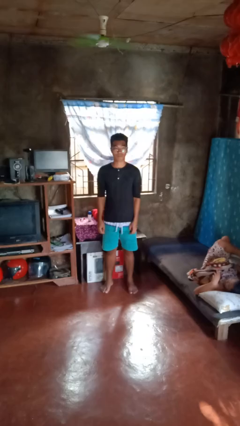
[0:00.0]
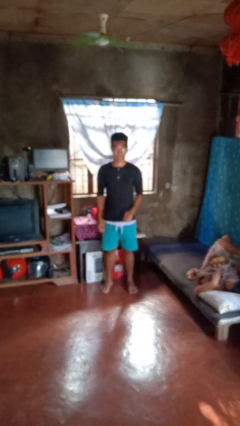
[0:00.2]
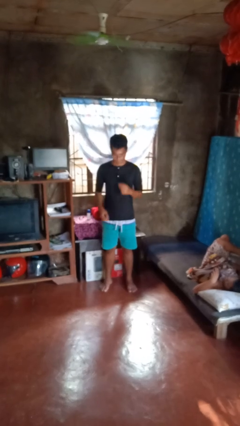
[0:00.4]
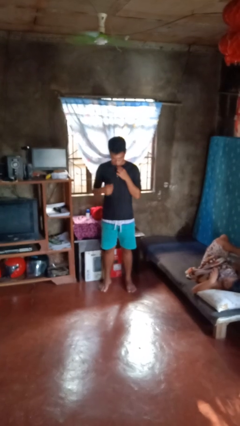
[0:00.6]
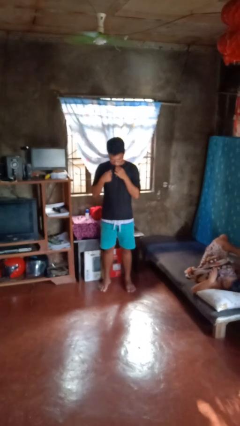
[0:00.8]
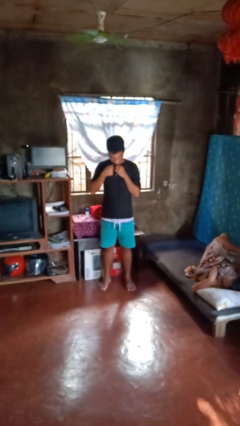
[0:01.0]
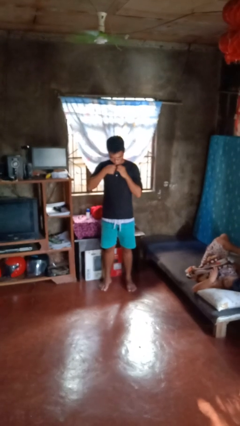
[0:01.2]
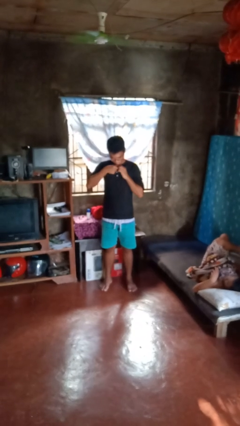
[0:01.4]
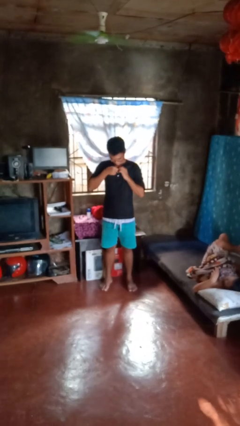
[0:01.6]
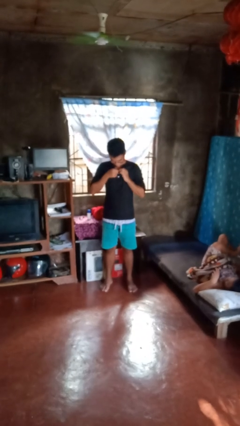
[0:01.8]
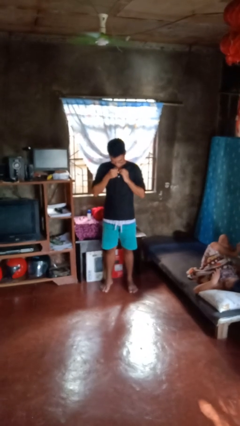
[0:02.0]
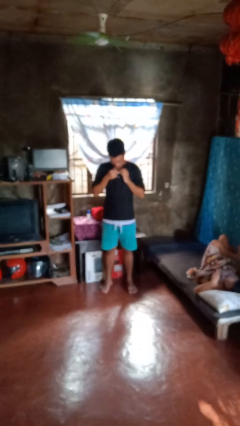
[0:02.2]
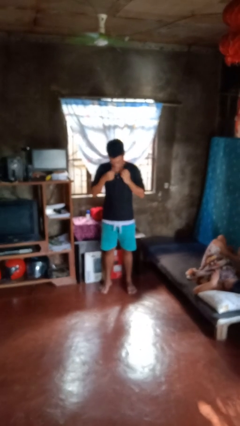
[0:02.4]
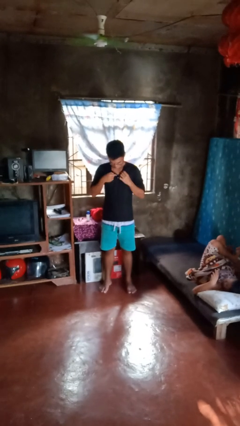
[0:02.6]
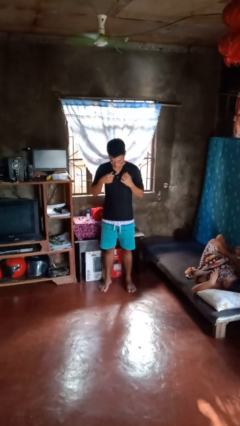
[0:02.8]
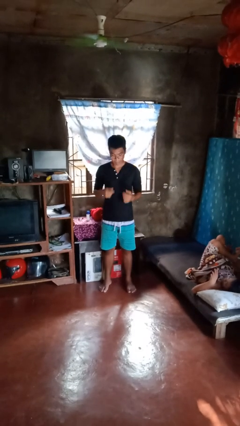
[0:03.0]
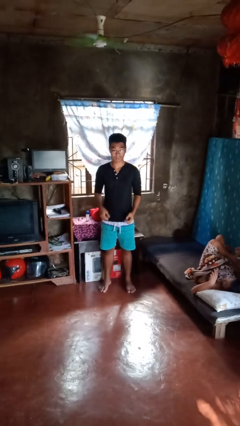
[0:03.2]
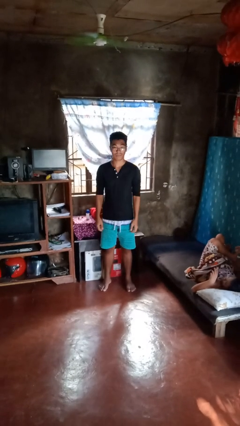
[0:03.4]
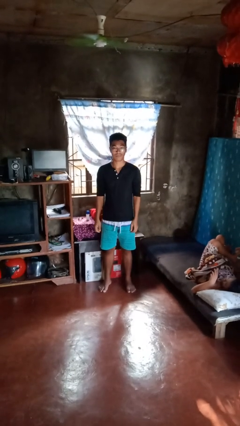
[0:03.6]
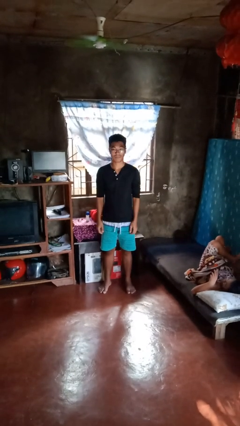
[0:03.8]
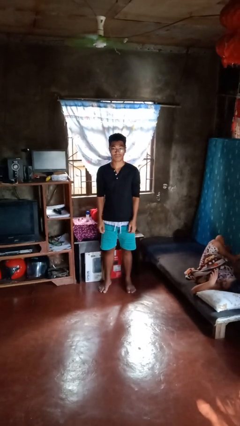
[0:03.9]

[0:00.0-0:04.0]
person unbuttons shirt

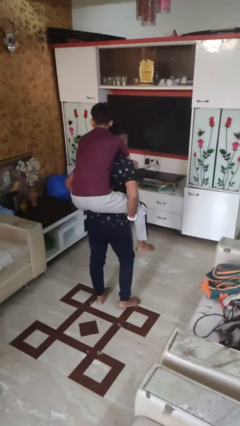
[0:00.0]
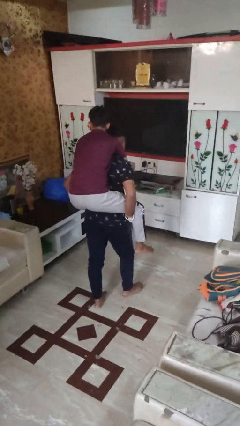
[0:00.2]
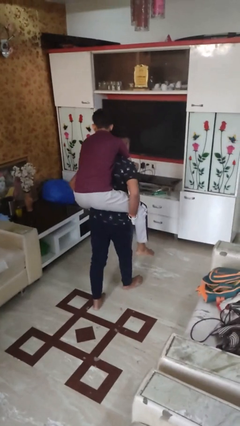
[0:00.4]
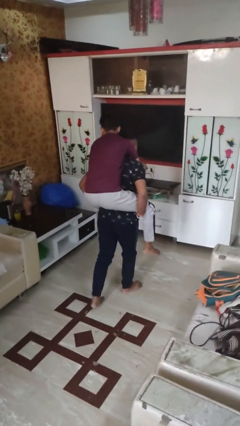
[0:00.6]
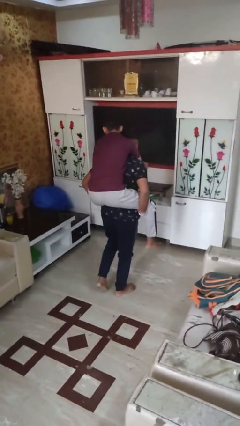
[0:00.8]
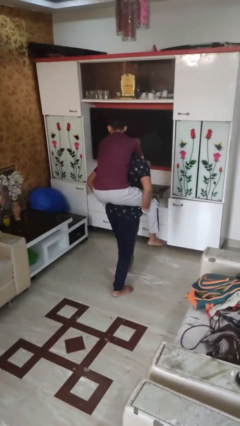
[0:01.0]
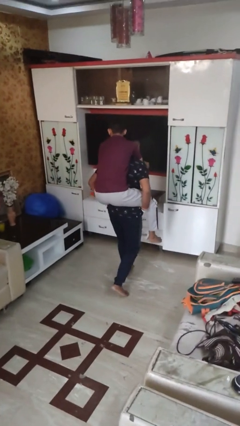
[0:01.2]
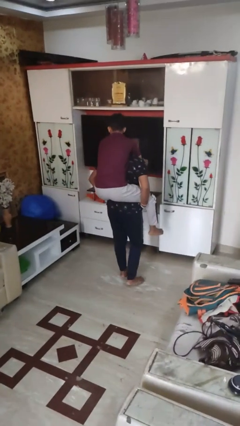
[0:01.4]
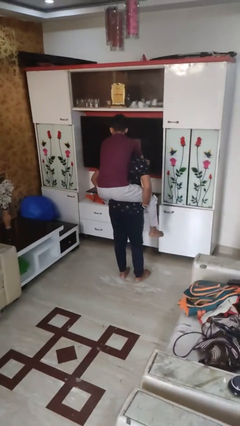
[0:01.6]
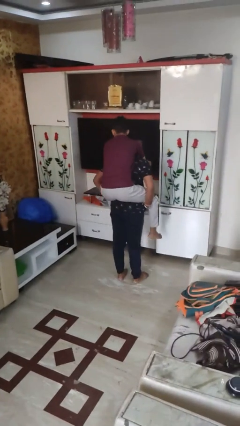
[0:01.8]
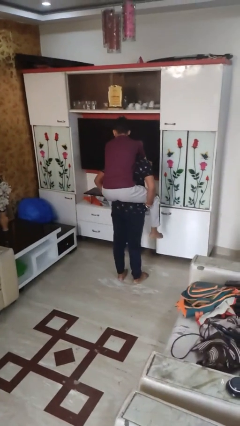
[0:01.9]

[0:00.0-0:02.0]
person carries person on back

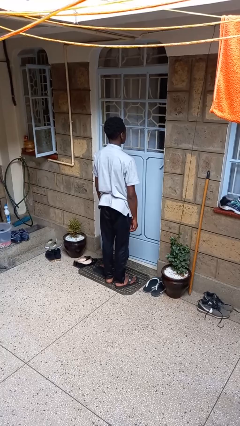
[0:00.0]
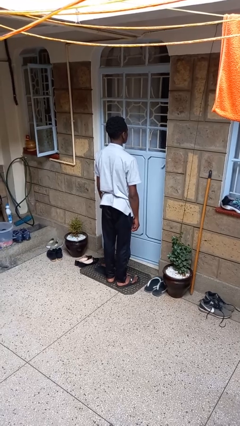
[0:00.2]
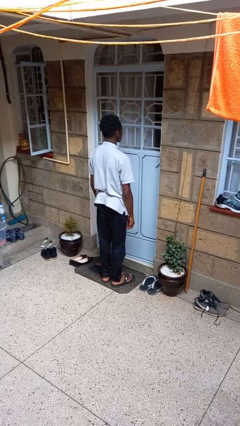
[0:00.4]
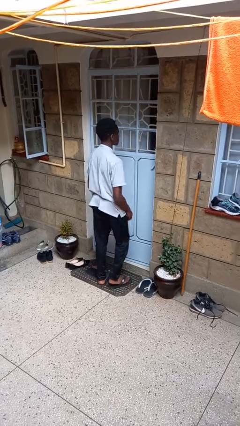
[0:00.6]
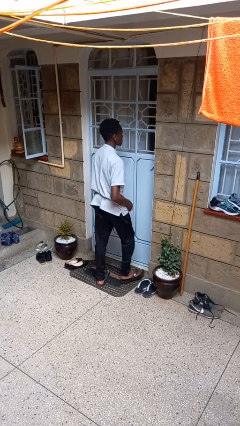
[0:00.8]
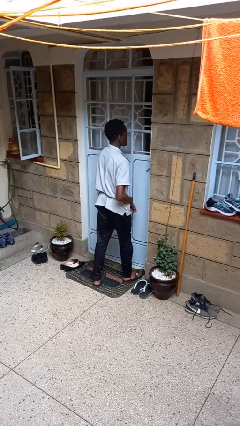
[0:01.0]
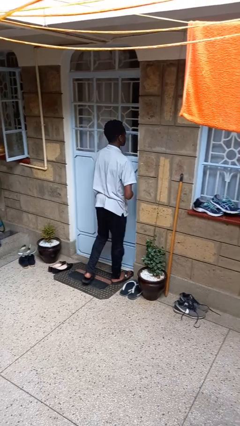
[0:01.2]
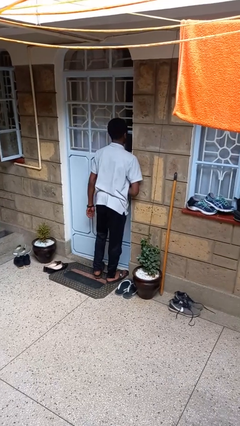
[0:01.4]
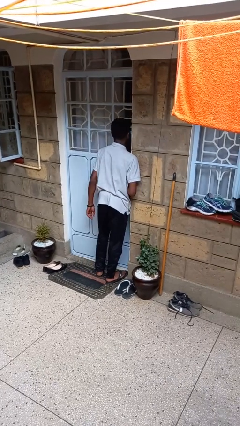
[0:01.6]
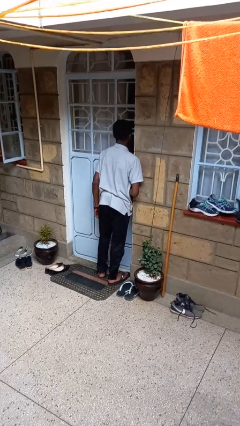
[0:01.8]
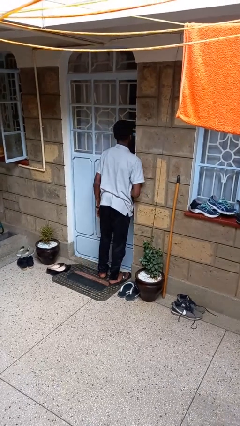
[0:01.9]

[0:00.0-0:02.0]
person bumps into wall

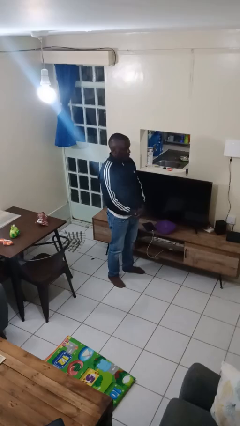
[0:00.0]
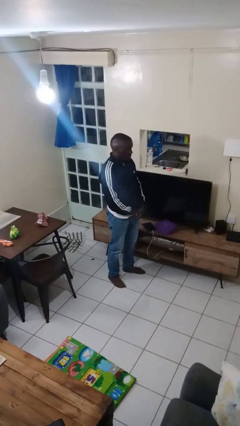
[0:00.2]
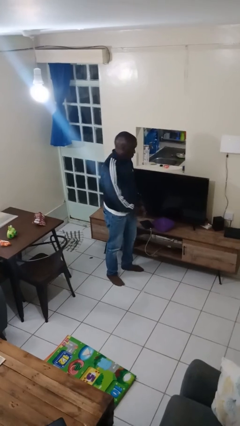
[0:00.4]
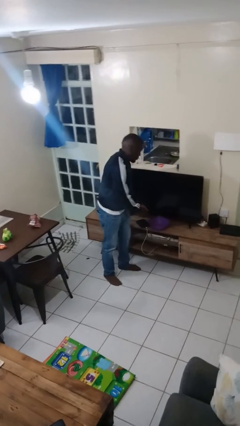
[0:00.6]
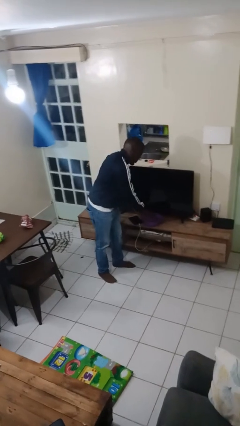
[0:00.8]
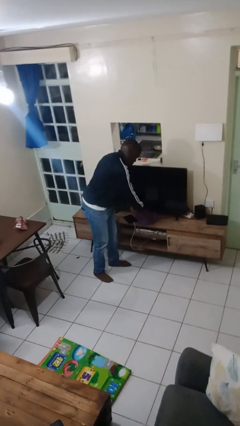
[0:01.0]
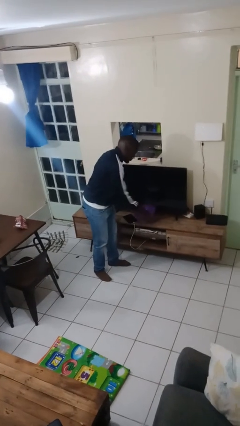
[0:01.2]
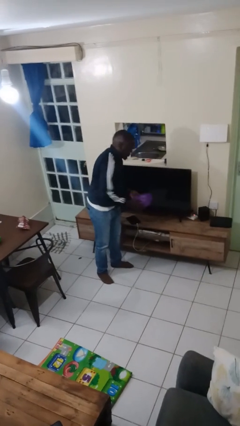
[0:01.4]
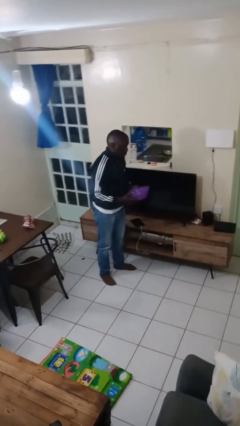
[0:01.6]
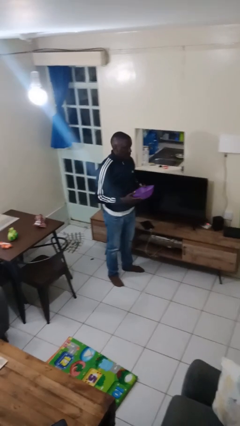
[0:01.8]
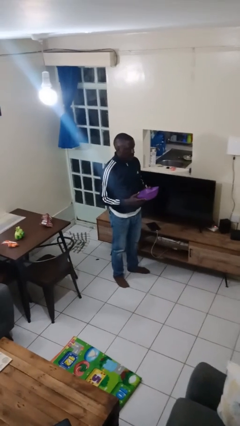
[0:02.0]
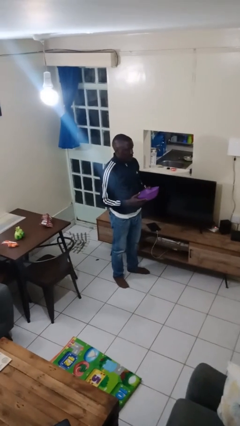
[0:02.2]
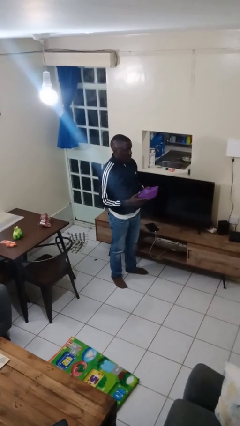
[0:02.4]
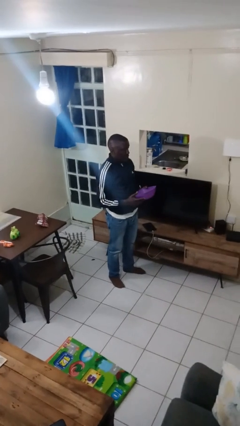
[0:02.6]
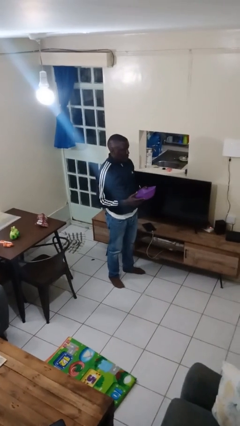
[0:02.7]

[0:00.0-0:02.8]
person picks up object from countertop

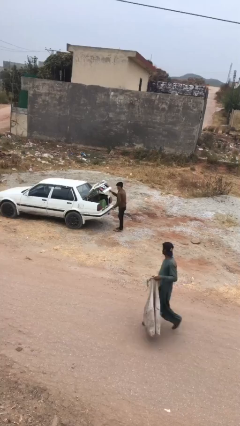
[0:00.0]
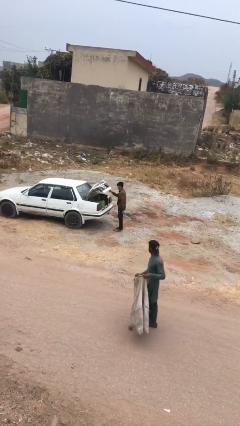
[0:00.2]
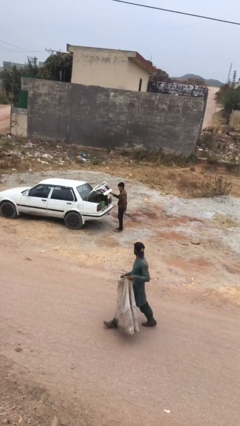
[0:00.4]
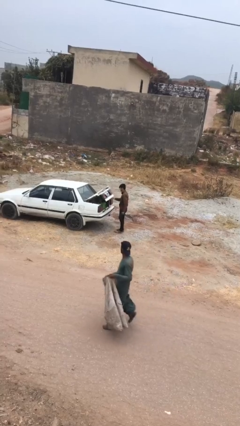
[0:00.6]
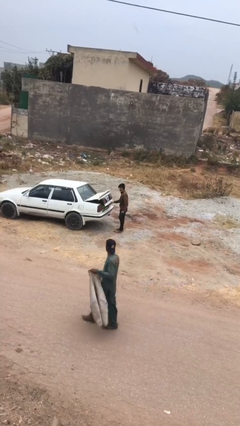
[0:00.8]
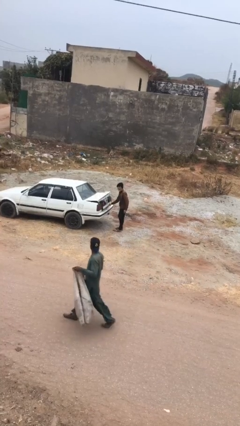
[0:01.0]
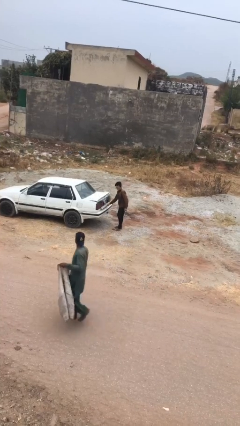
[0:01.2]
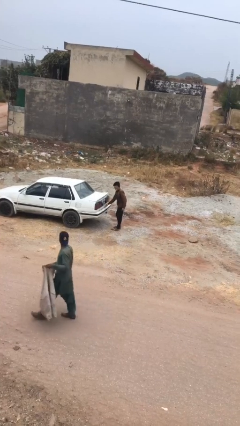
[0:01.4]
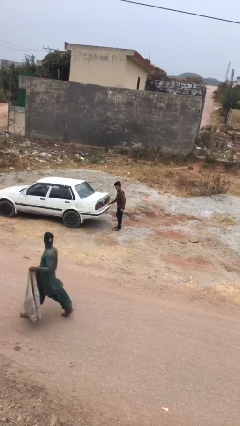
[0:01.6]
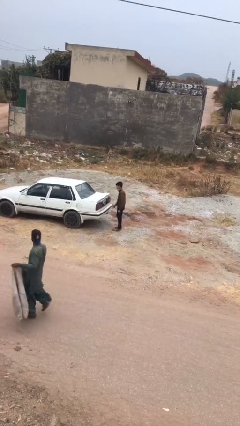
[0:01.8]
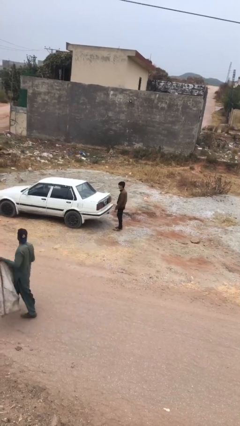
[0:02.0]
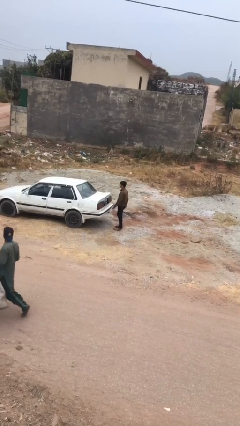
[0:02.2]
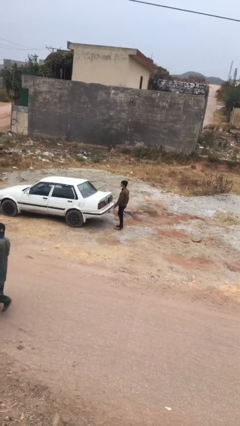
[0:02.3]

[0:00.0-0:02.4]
person closes car trunk

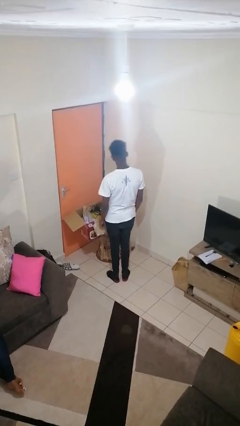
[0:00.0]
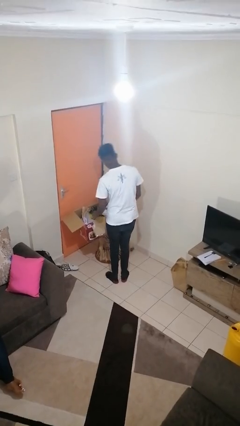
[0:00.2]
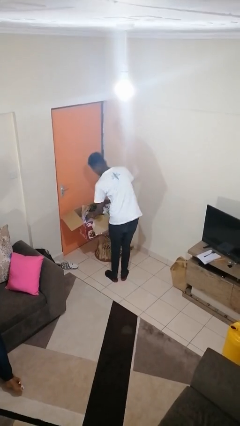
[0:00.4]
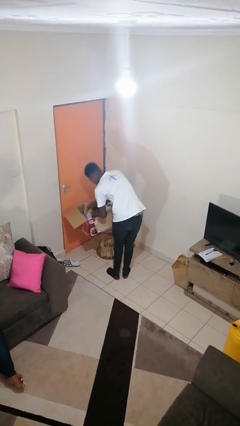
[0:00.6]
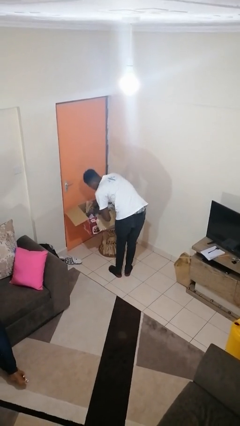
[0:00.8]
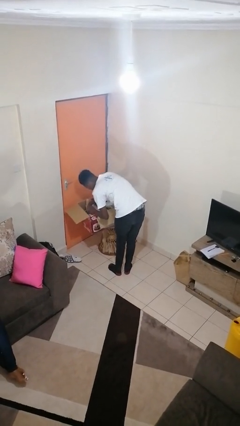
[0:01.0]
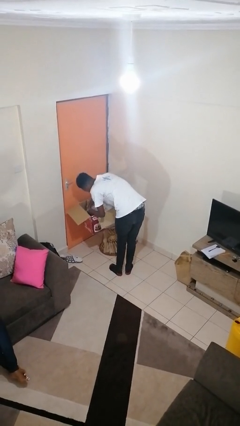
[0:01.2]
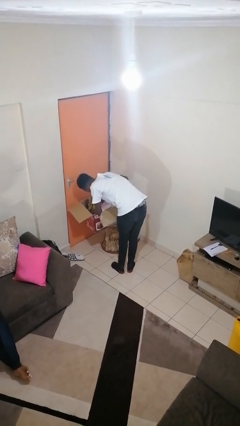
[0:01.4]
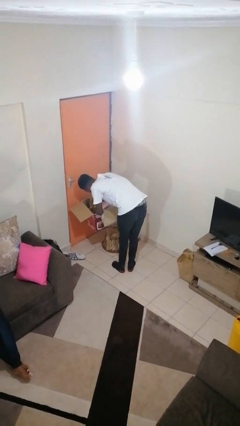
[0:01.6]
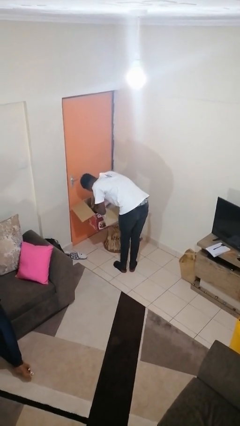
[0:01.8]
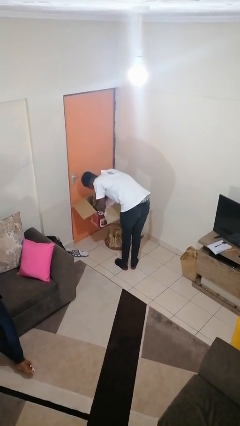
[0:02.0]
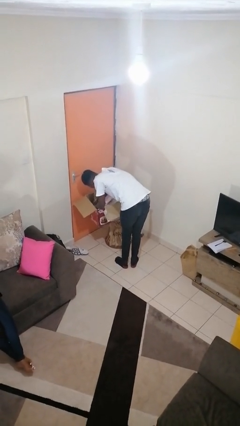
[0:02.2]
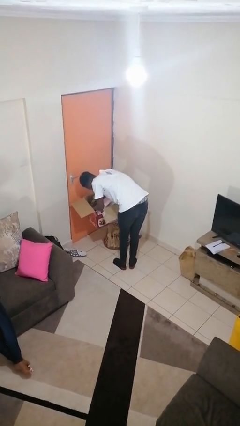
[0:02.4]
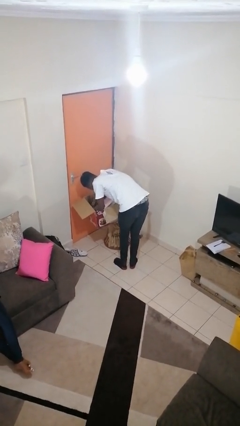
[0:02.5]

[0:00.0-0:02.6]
person searches in box

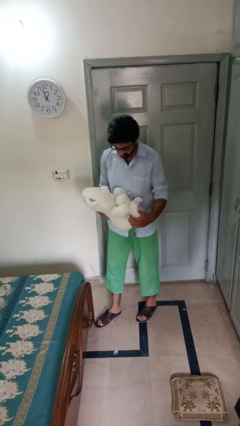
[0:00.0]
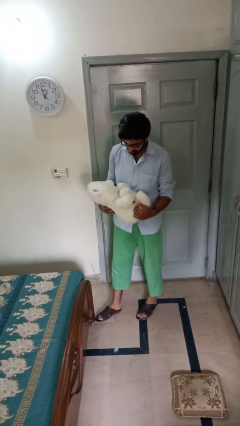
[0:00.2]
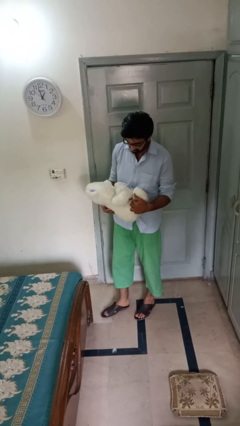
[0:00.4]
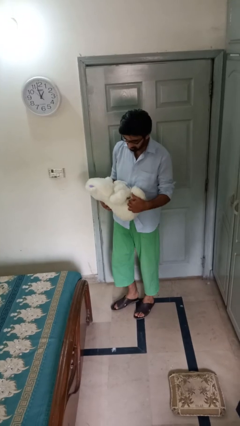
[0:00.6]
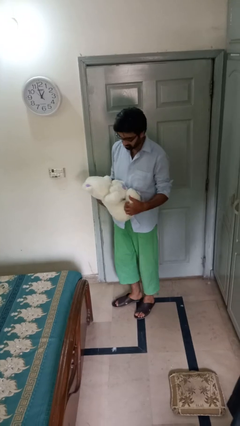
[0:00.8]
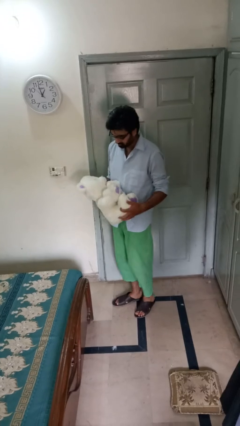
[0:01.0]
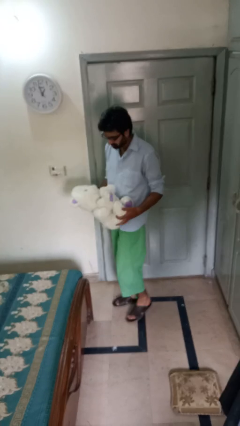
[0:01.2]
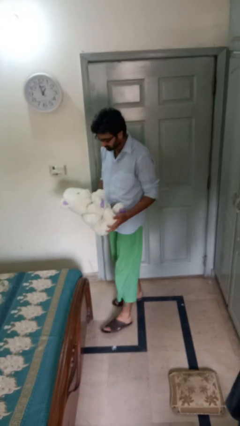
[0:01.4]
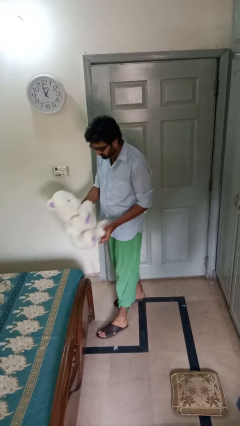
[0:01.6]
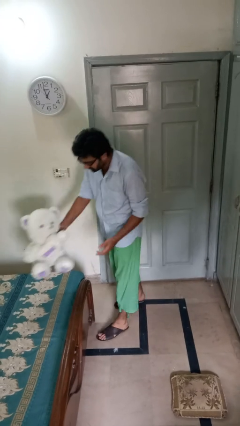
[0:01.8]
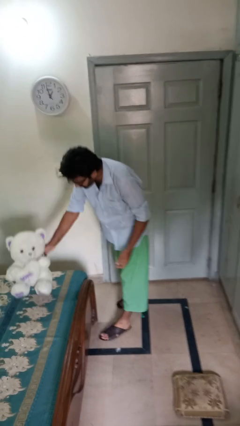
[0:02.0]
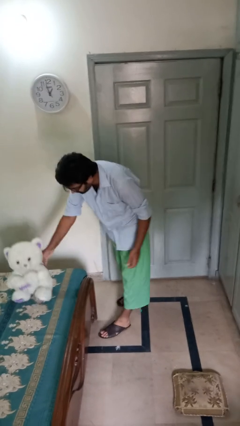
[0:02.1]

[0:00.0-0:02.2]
person puts down object on bed
